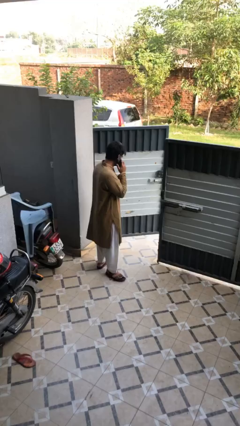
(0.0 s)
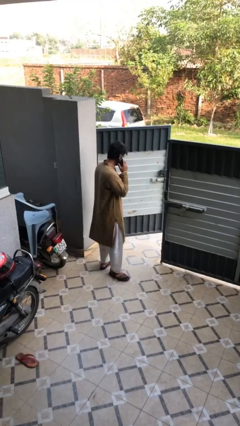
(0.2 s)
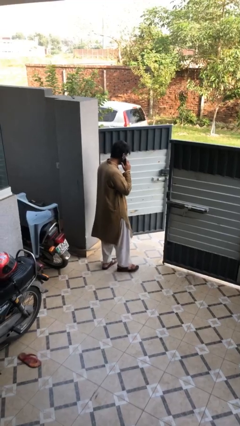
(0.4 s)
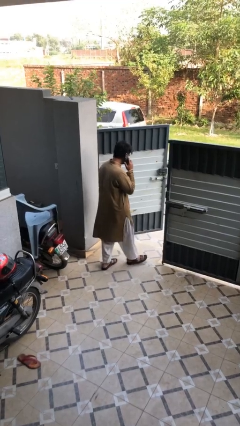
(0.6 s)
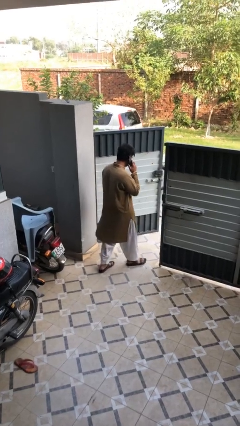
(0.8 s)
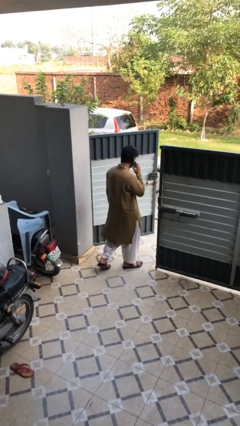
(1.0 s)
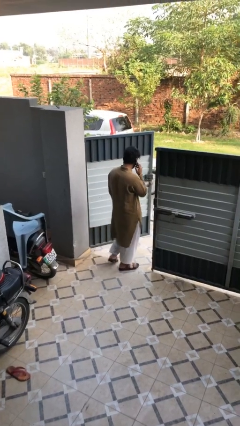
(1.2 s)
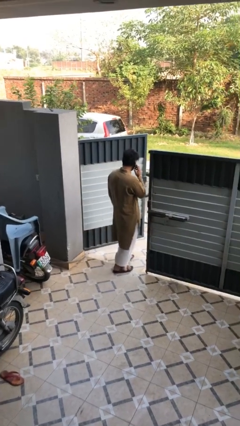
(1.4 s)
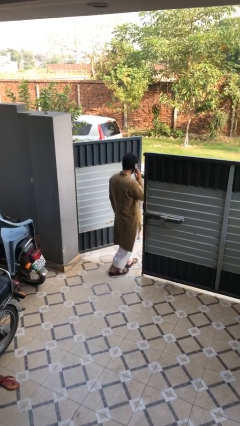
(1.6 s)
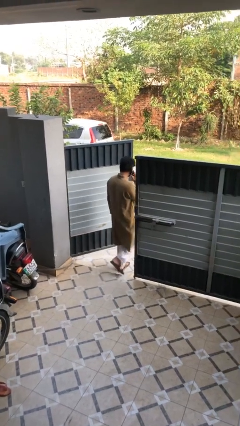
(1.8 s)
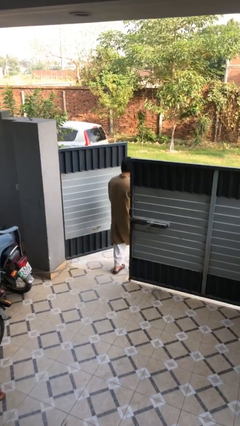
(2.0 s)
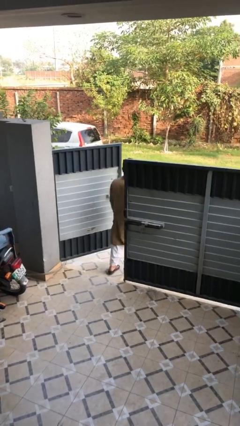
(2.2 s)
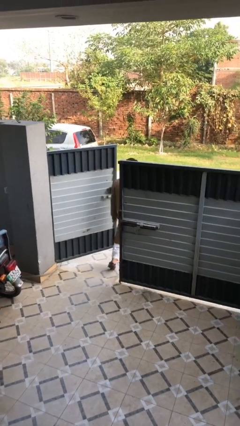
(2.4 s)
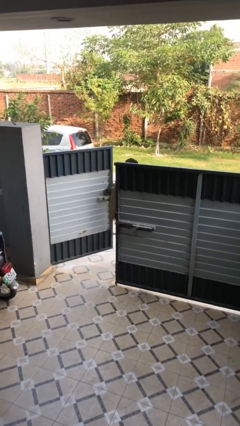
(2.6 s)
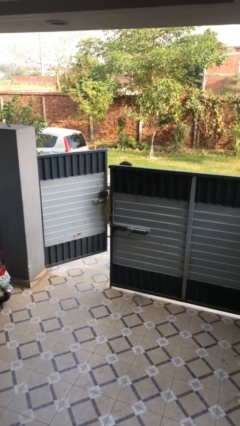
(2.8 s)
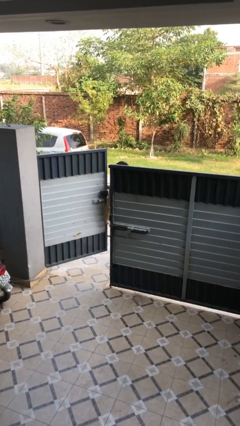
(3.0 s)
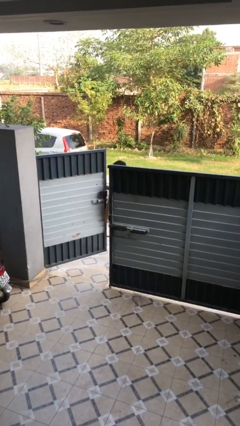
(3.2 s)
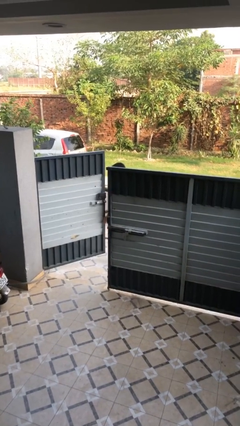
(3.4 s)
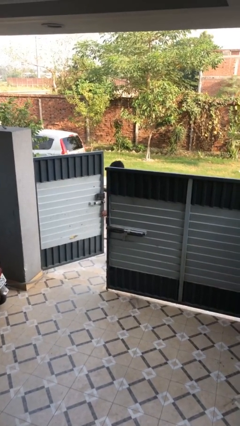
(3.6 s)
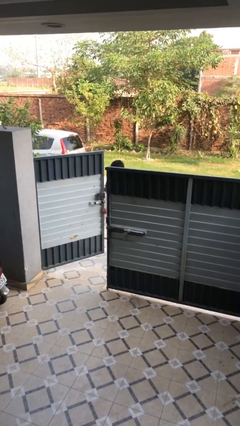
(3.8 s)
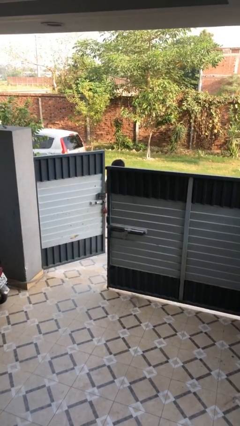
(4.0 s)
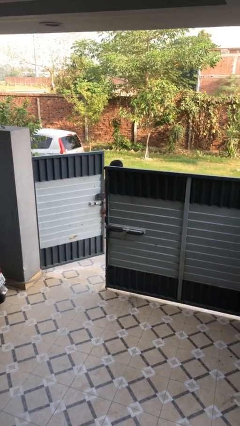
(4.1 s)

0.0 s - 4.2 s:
person exits scene through structure

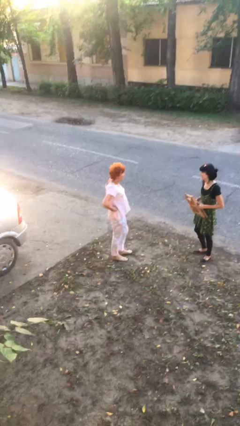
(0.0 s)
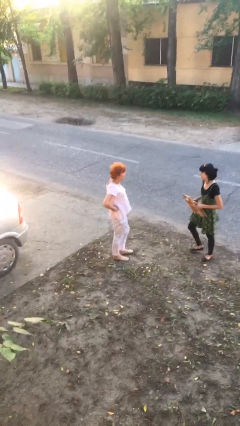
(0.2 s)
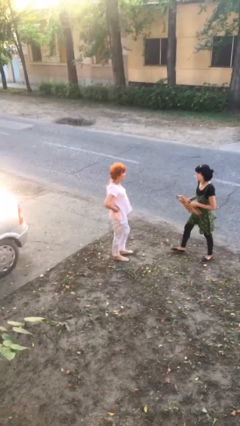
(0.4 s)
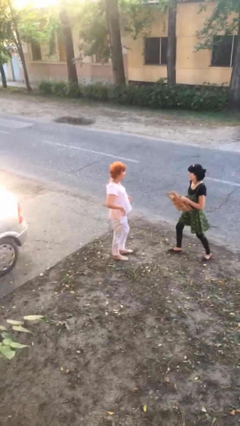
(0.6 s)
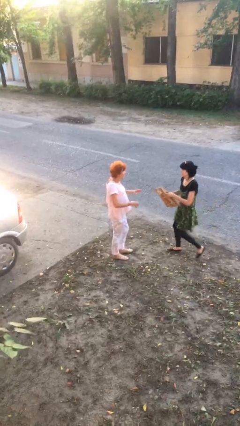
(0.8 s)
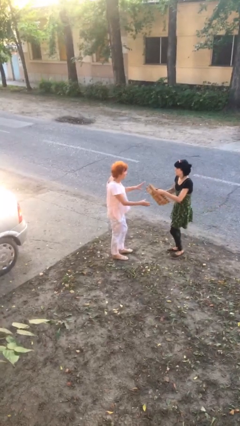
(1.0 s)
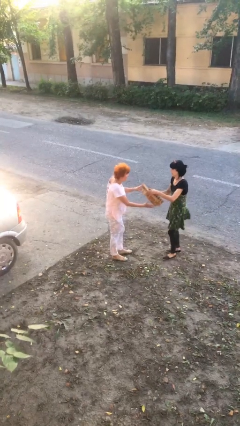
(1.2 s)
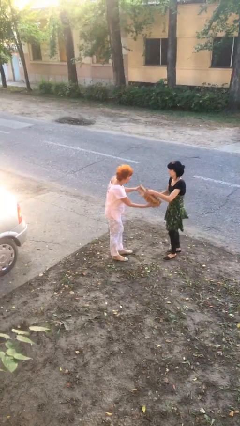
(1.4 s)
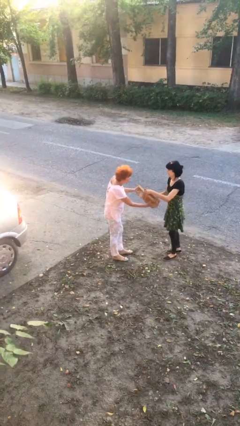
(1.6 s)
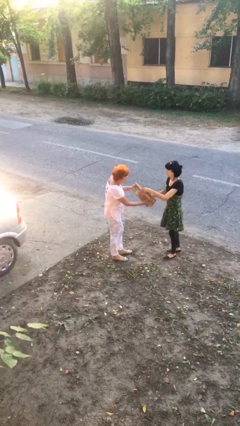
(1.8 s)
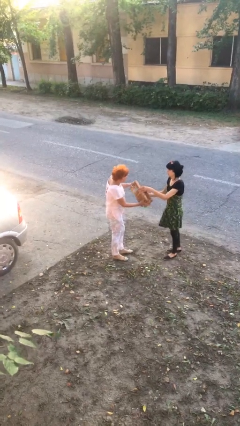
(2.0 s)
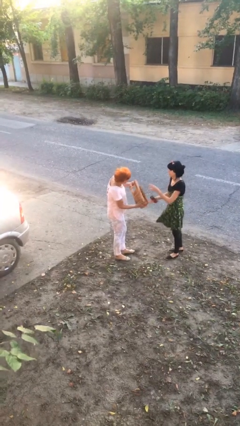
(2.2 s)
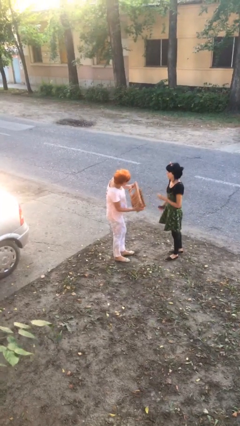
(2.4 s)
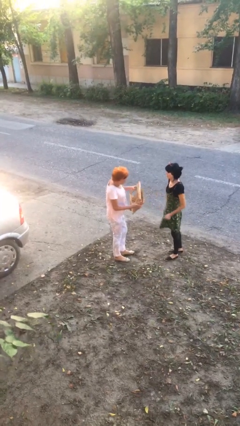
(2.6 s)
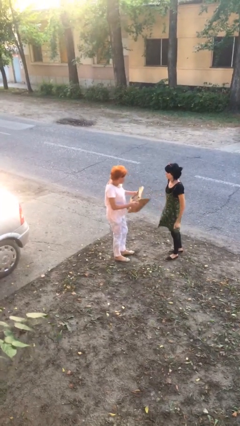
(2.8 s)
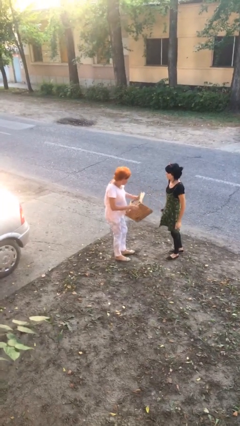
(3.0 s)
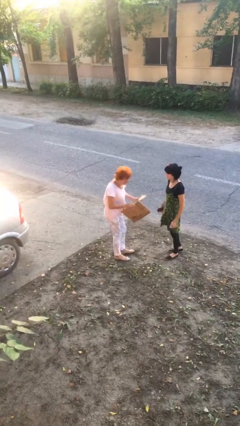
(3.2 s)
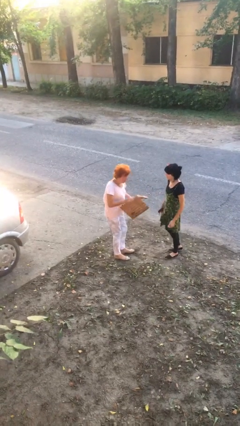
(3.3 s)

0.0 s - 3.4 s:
person transfers object to person

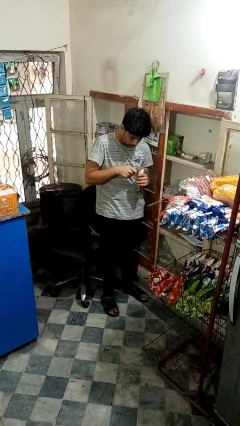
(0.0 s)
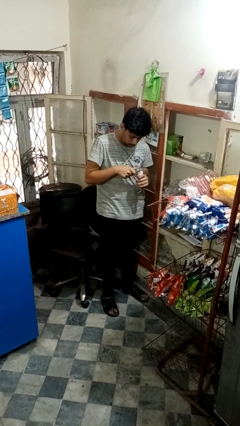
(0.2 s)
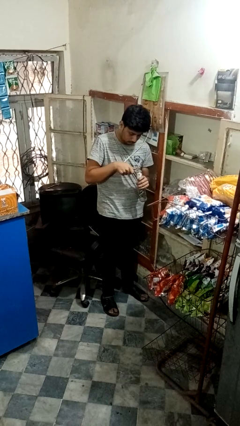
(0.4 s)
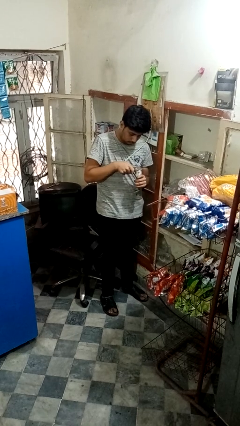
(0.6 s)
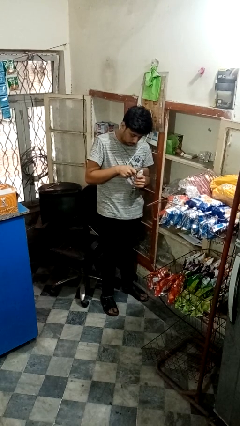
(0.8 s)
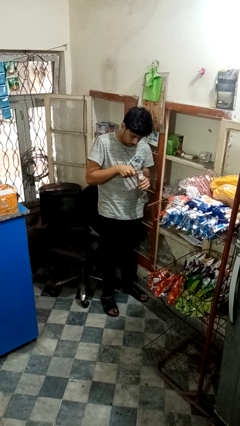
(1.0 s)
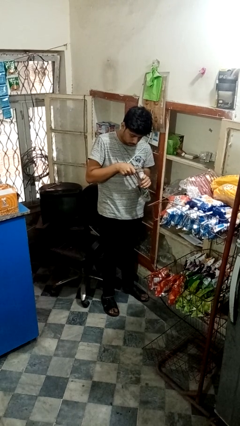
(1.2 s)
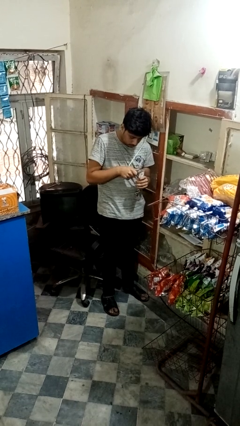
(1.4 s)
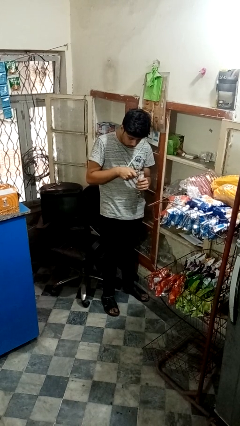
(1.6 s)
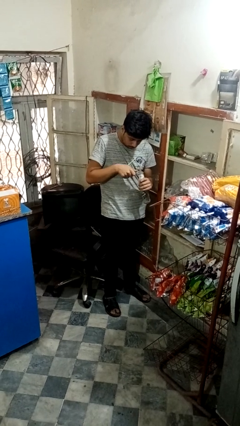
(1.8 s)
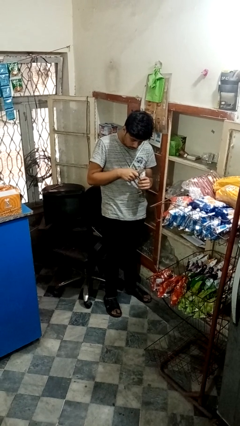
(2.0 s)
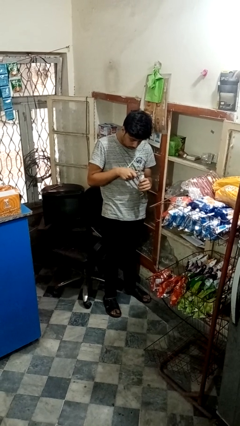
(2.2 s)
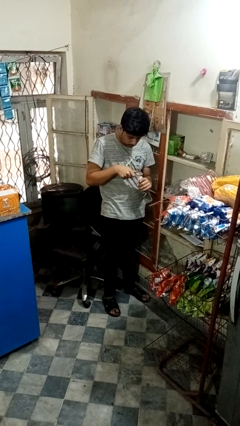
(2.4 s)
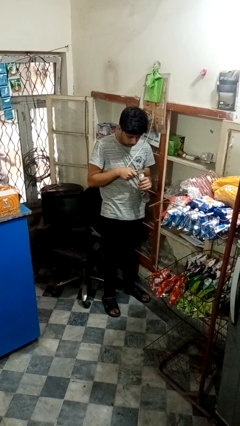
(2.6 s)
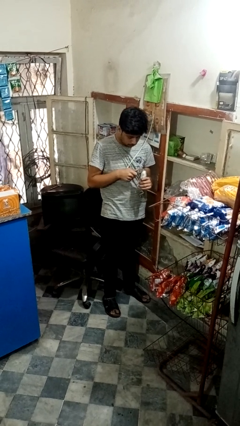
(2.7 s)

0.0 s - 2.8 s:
person opens can with can opener

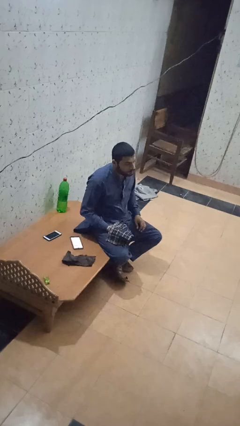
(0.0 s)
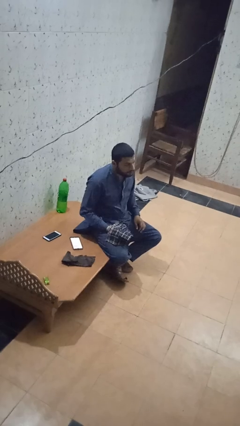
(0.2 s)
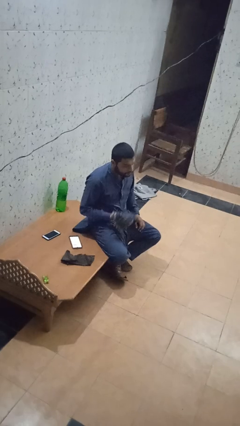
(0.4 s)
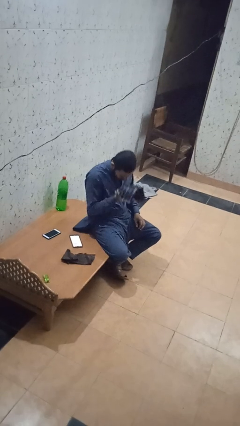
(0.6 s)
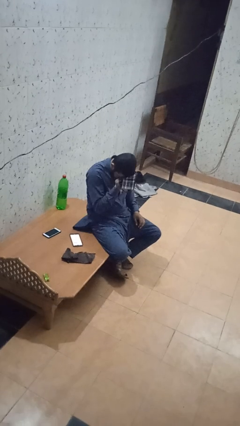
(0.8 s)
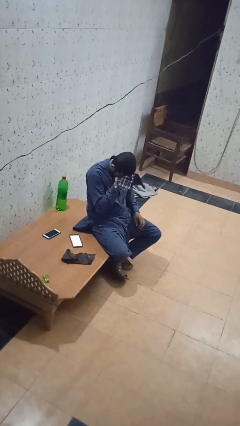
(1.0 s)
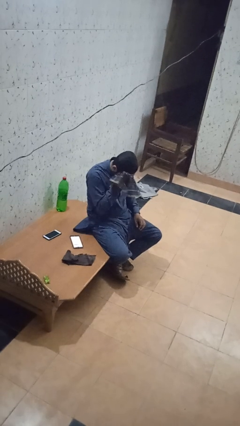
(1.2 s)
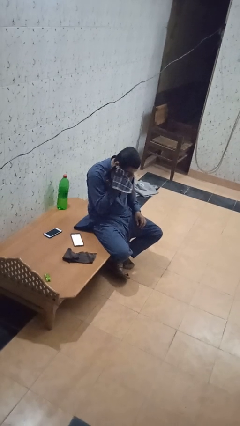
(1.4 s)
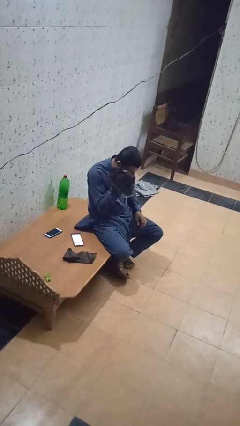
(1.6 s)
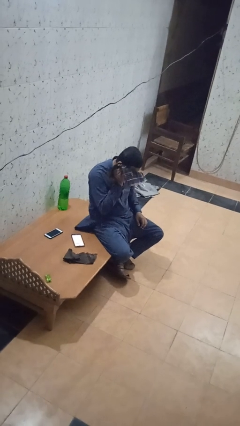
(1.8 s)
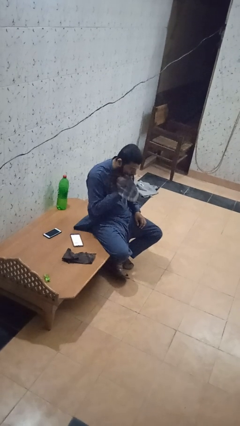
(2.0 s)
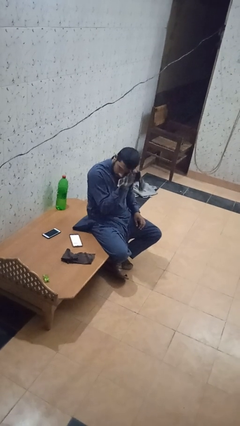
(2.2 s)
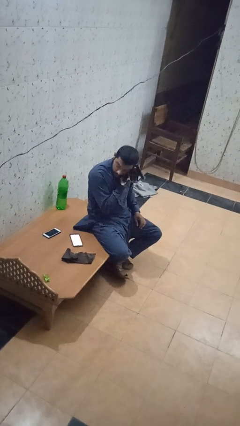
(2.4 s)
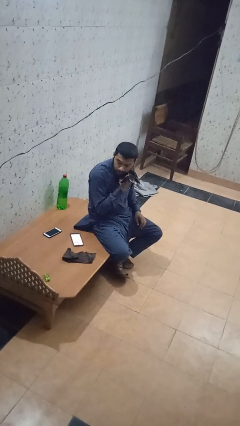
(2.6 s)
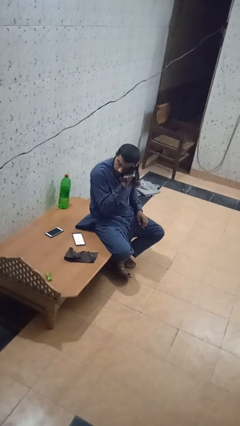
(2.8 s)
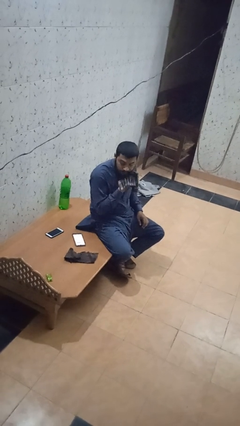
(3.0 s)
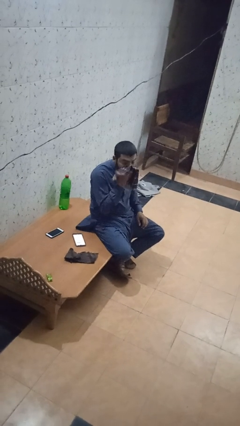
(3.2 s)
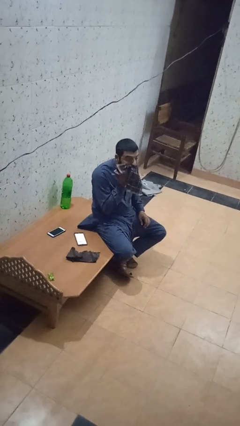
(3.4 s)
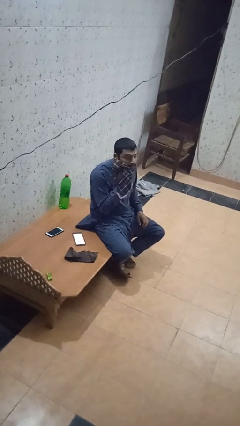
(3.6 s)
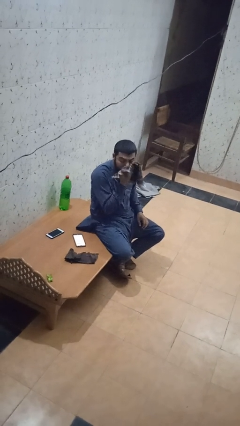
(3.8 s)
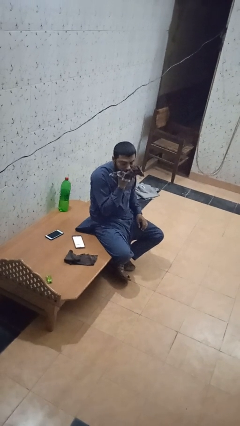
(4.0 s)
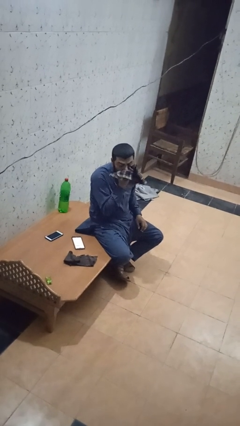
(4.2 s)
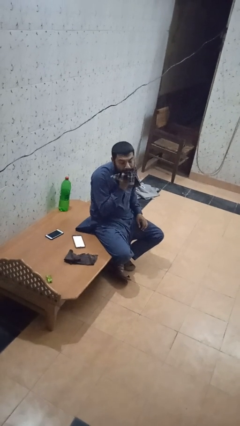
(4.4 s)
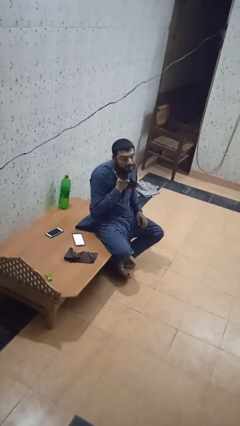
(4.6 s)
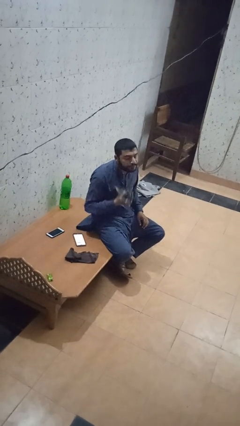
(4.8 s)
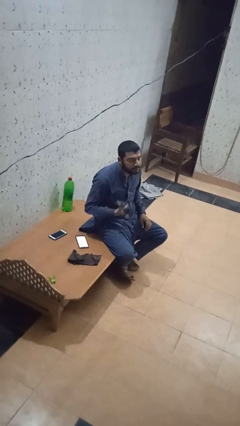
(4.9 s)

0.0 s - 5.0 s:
person wipes mouth with napkin

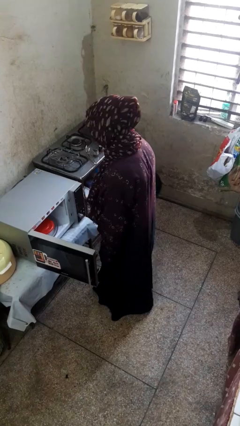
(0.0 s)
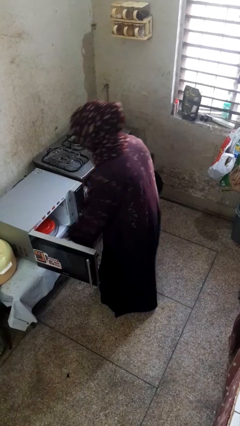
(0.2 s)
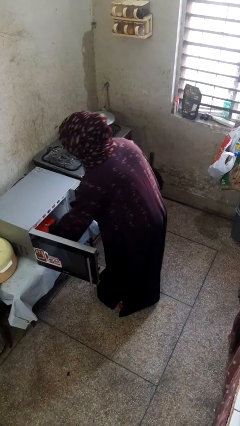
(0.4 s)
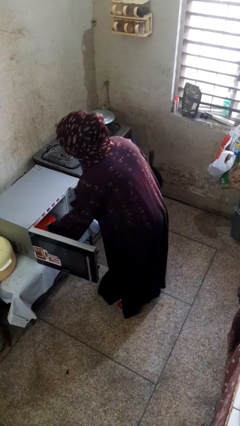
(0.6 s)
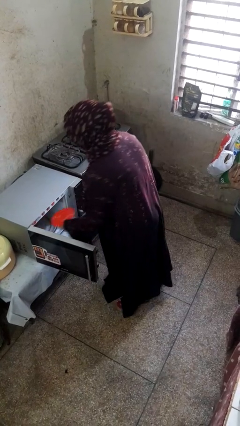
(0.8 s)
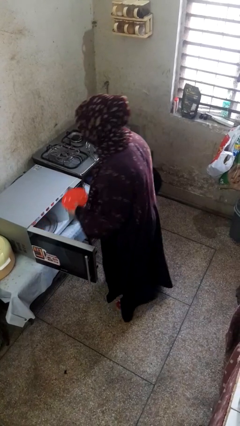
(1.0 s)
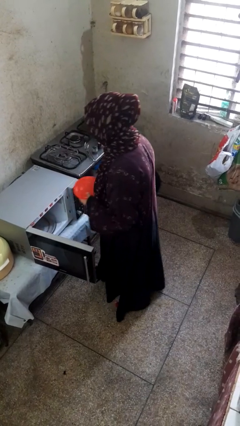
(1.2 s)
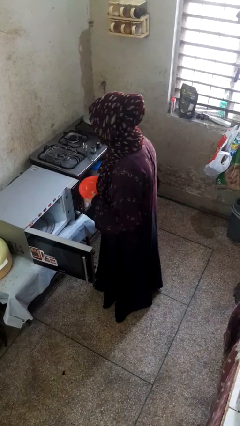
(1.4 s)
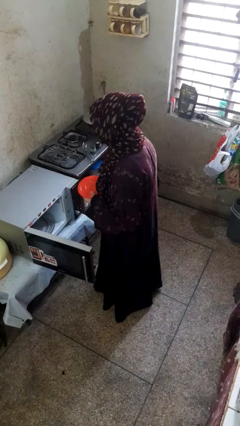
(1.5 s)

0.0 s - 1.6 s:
person takes object from microwave

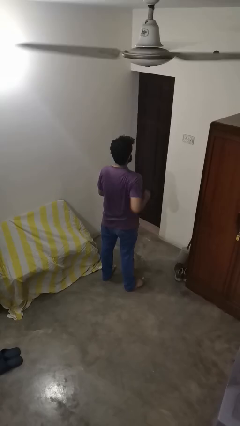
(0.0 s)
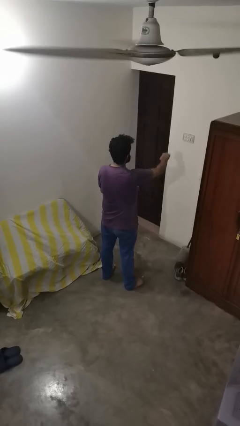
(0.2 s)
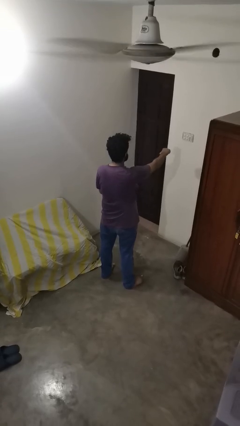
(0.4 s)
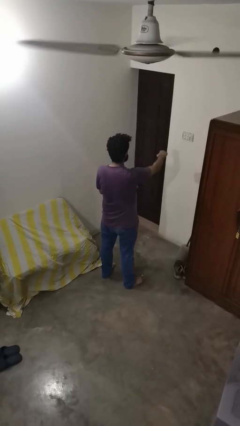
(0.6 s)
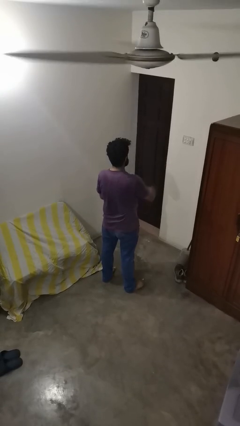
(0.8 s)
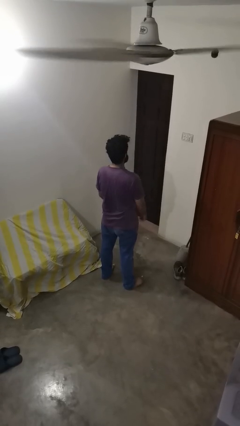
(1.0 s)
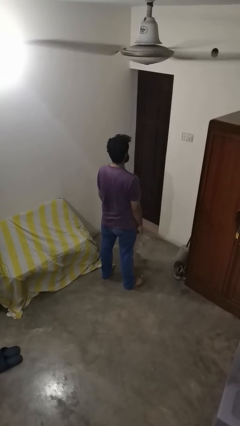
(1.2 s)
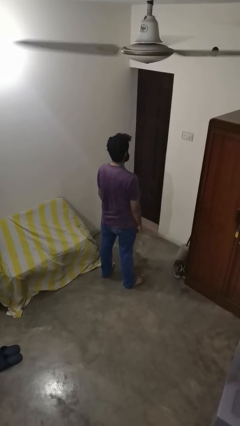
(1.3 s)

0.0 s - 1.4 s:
person punches
